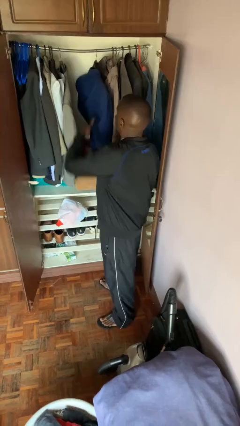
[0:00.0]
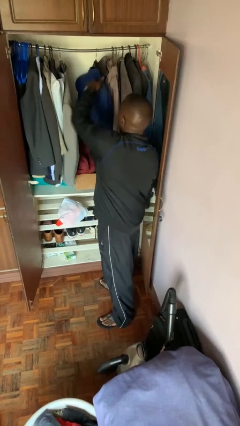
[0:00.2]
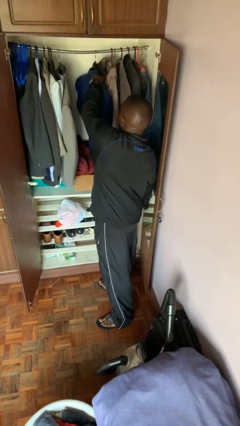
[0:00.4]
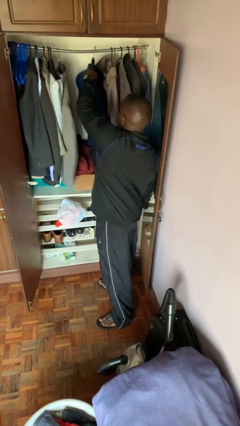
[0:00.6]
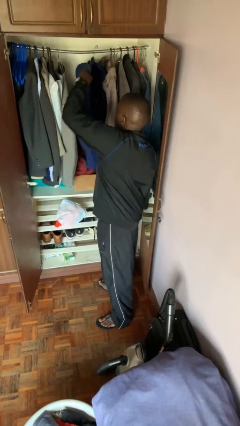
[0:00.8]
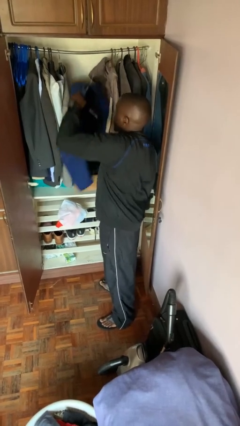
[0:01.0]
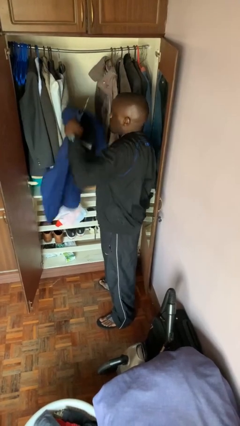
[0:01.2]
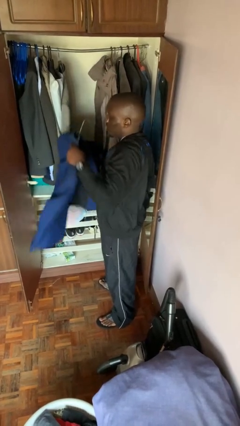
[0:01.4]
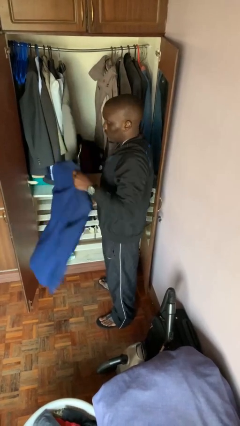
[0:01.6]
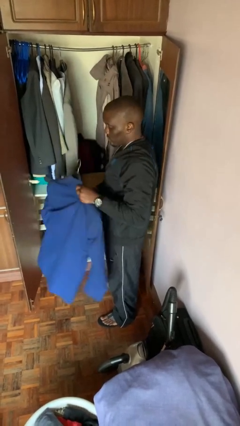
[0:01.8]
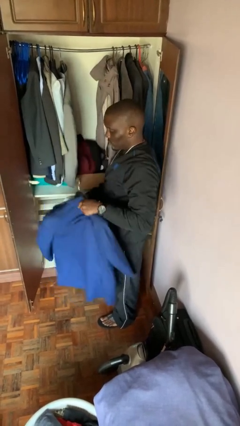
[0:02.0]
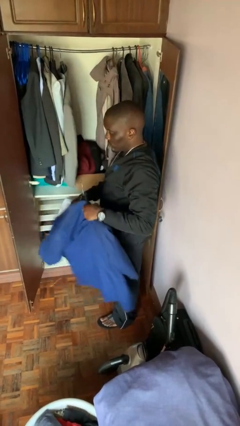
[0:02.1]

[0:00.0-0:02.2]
person takes clothes from closet

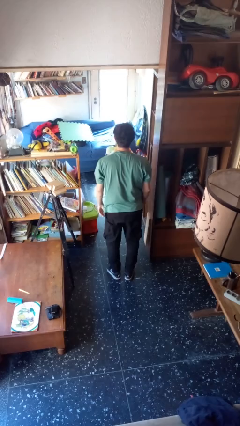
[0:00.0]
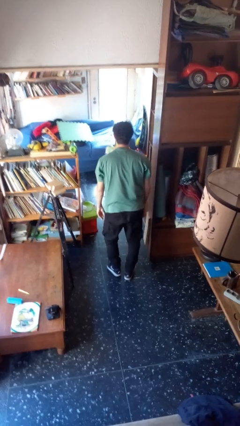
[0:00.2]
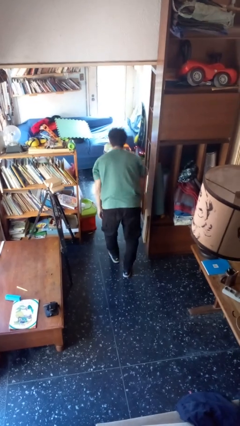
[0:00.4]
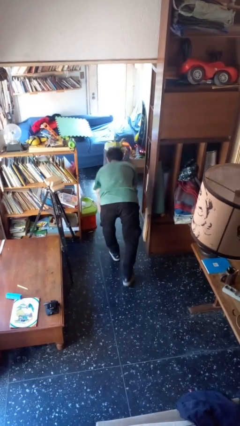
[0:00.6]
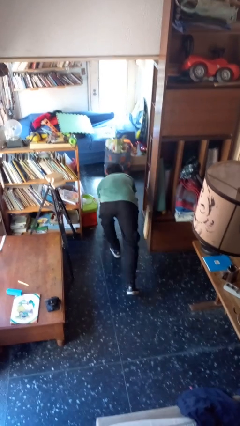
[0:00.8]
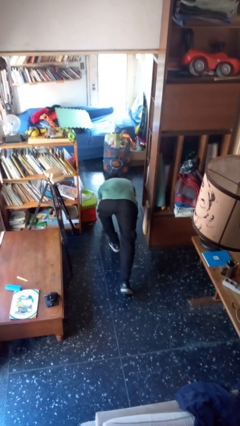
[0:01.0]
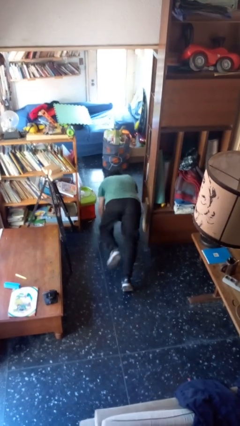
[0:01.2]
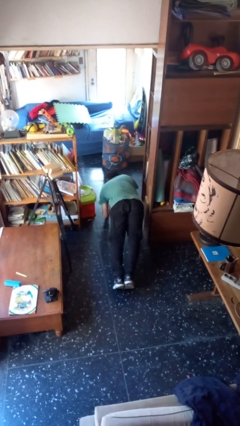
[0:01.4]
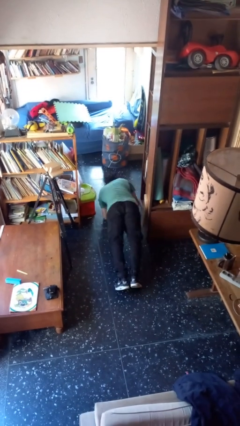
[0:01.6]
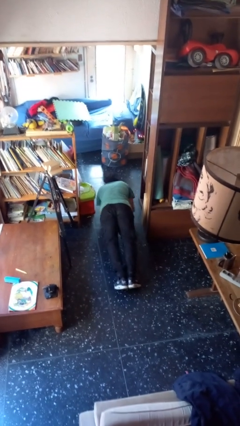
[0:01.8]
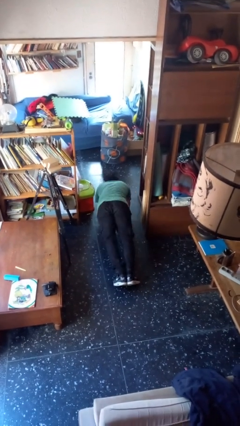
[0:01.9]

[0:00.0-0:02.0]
person exercises with plank

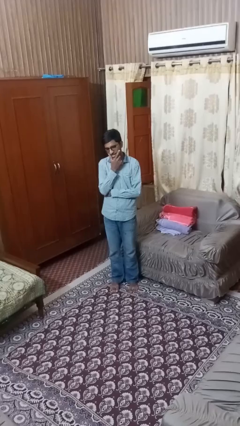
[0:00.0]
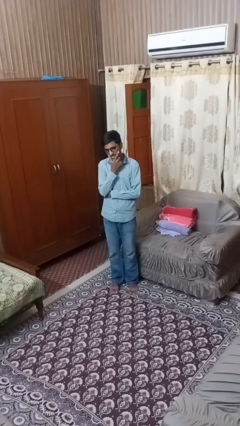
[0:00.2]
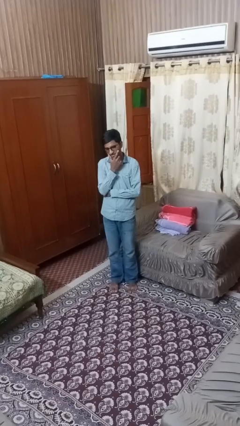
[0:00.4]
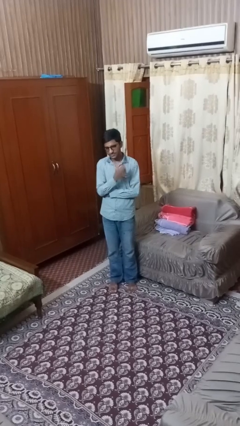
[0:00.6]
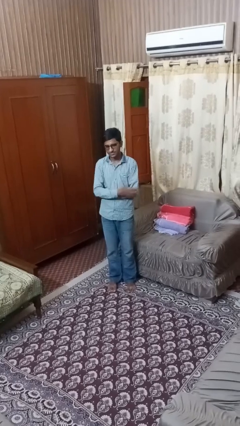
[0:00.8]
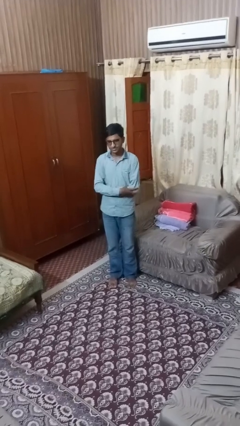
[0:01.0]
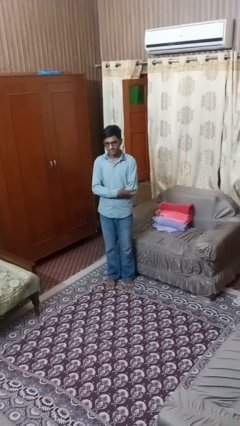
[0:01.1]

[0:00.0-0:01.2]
person strokes chin

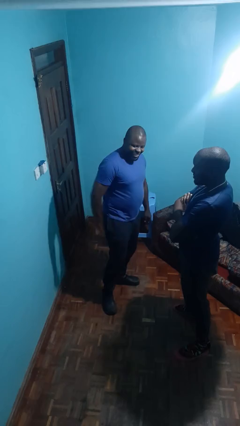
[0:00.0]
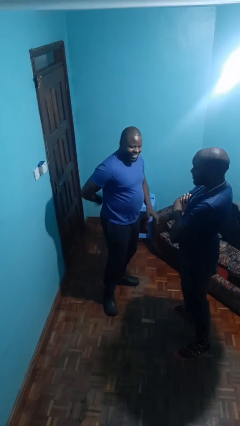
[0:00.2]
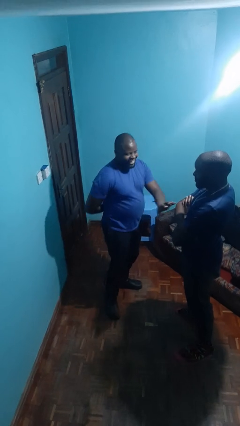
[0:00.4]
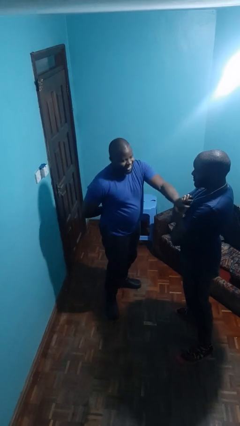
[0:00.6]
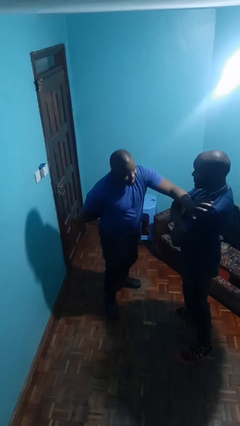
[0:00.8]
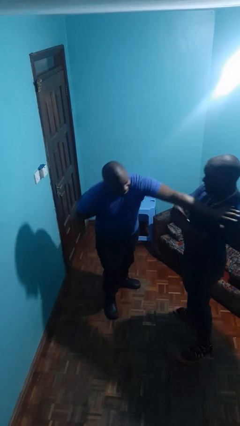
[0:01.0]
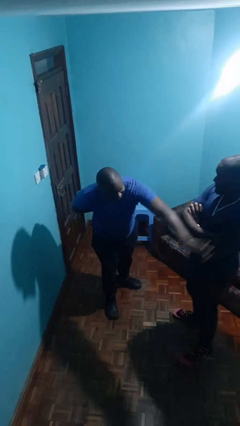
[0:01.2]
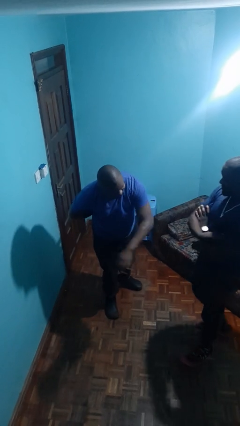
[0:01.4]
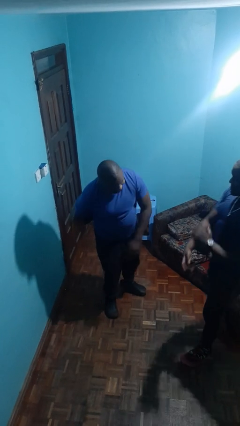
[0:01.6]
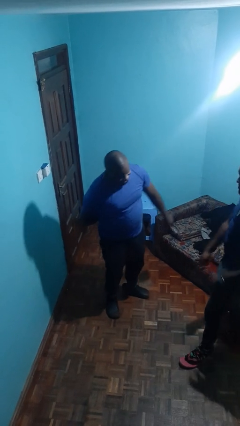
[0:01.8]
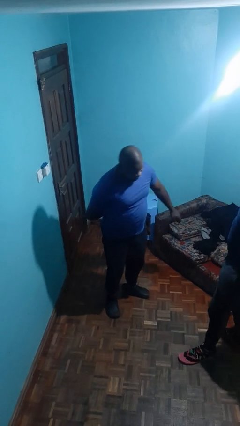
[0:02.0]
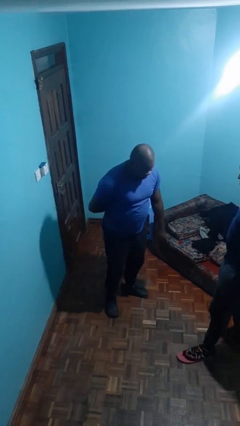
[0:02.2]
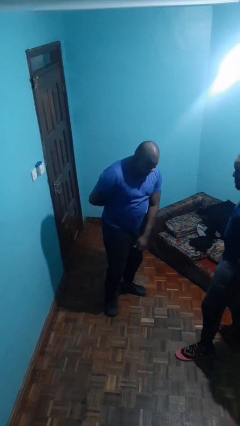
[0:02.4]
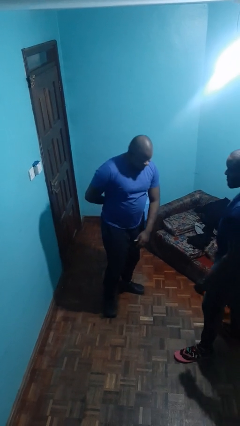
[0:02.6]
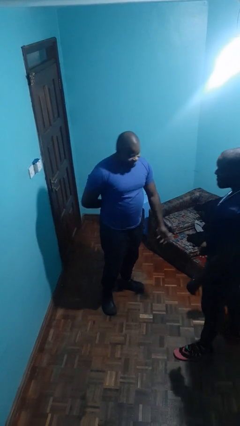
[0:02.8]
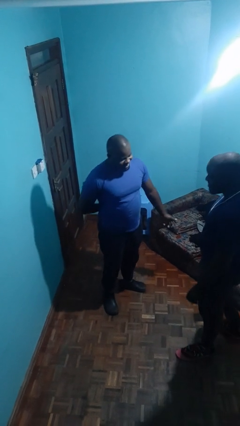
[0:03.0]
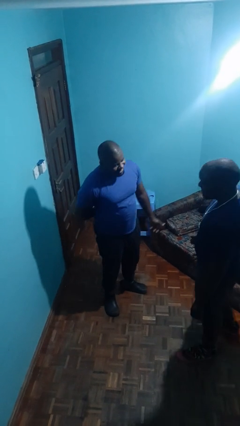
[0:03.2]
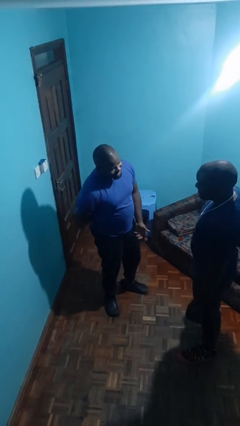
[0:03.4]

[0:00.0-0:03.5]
person shoves person

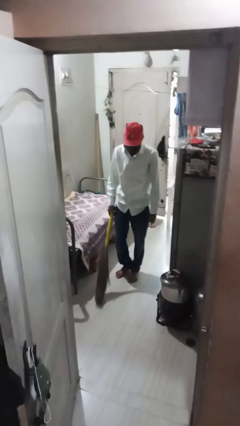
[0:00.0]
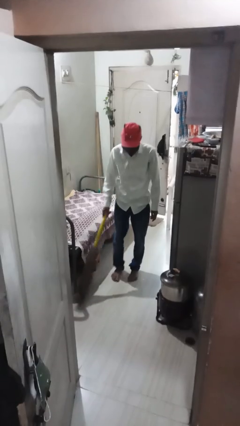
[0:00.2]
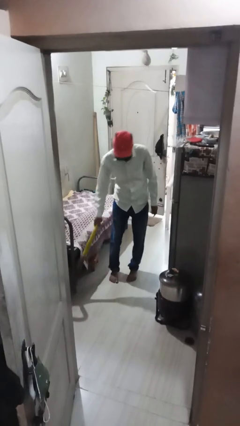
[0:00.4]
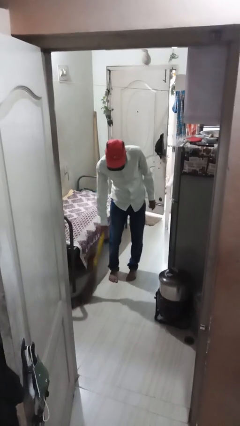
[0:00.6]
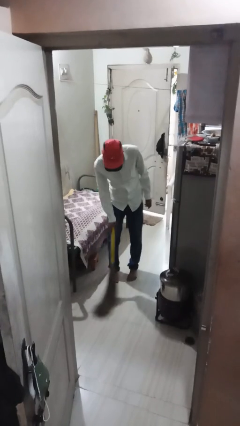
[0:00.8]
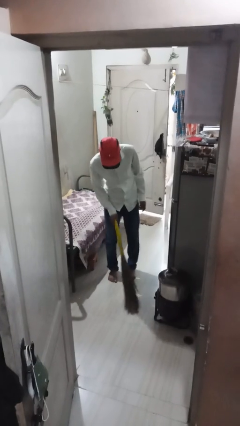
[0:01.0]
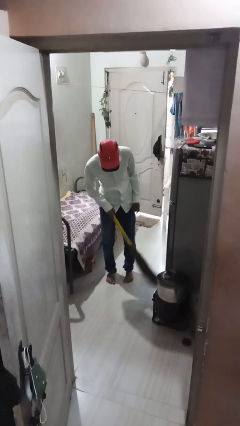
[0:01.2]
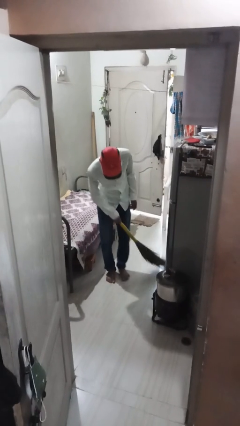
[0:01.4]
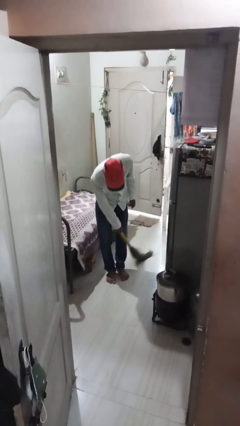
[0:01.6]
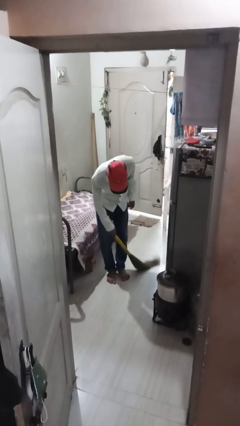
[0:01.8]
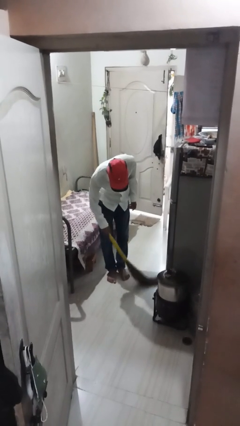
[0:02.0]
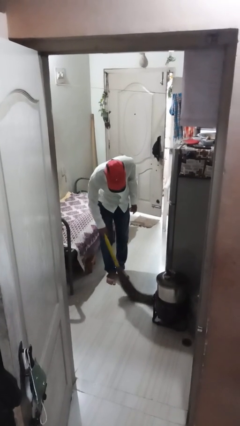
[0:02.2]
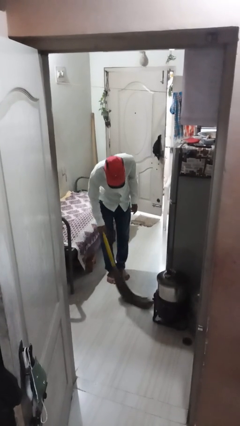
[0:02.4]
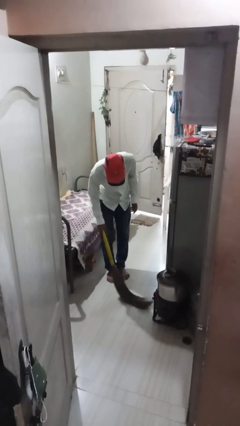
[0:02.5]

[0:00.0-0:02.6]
person sweeps floor

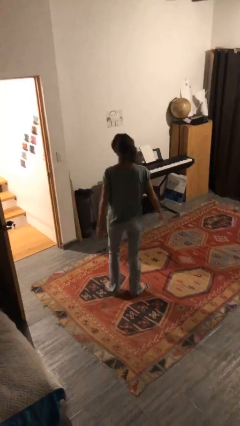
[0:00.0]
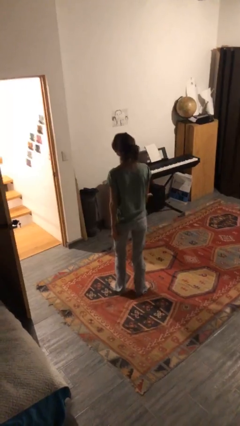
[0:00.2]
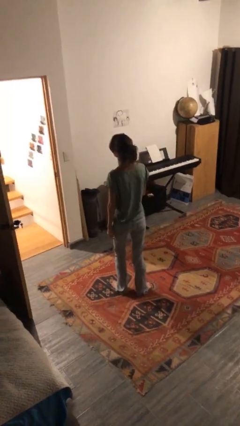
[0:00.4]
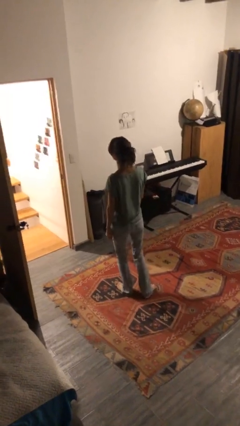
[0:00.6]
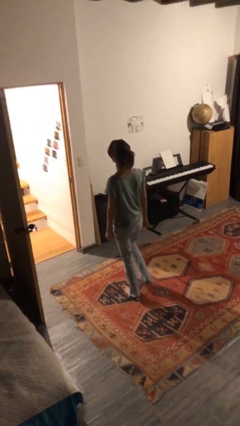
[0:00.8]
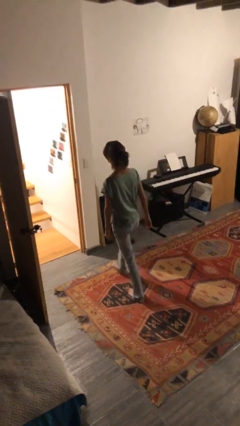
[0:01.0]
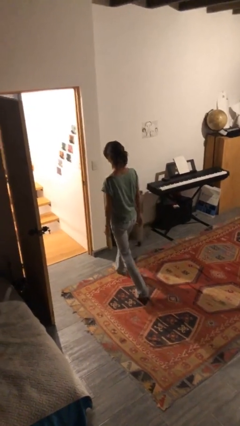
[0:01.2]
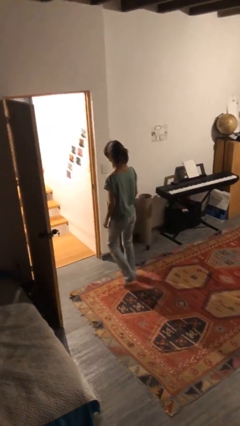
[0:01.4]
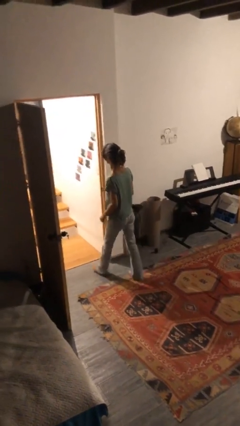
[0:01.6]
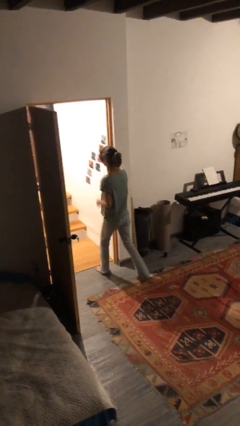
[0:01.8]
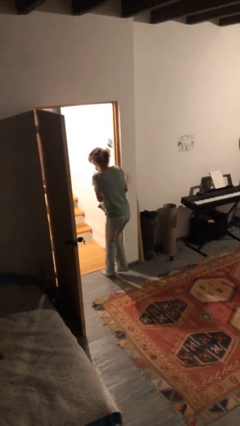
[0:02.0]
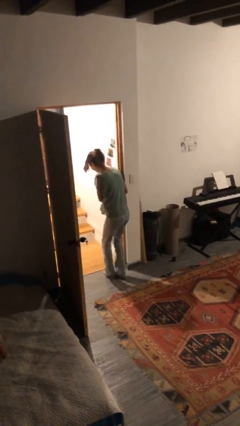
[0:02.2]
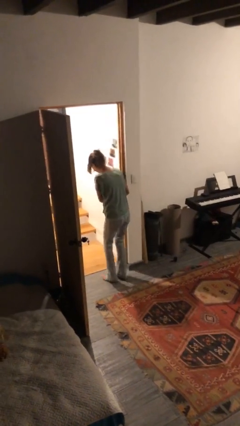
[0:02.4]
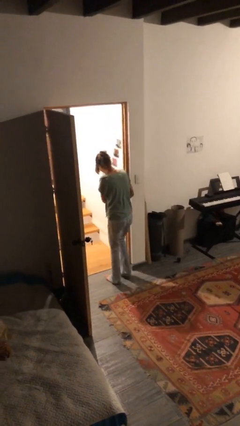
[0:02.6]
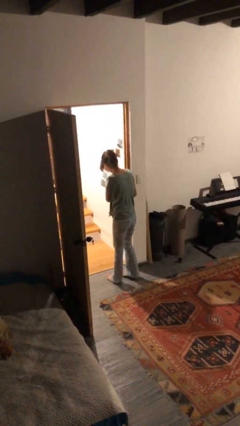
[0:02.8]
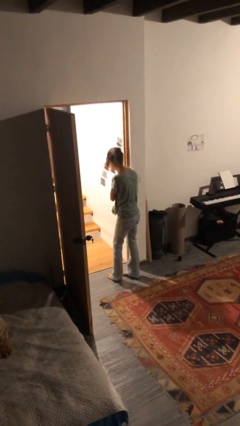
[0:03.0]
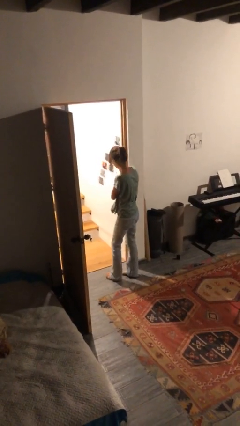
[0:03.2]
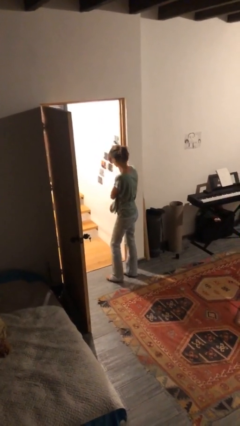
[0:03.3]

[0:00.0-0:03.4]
person bumps into wall

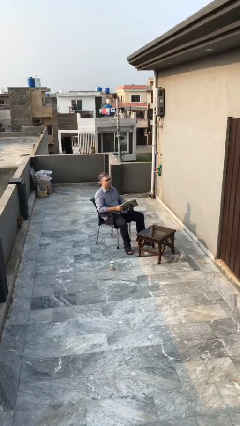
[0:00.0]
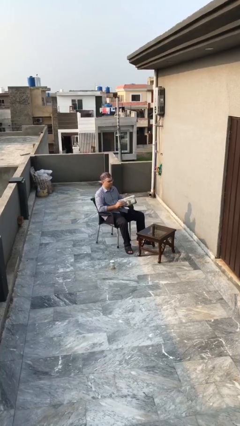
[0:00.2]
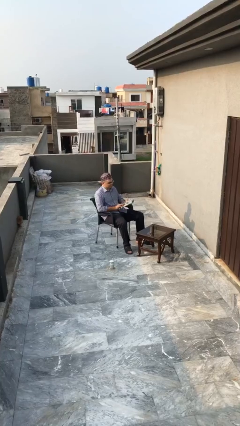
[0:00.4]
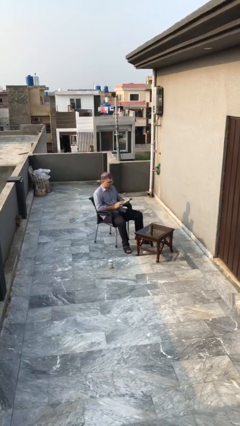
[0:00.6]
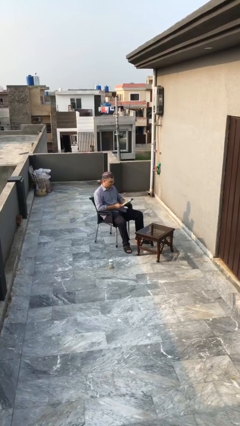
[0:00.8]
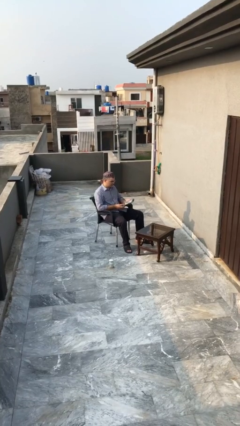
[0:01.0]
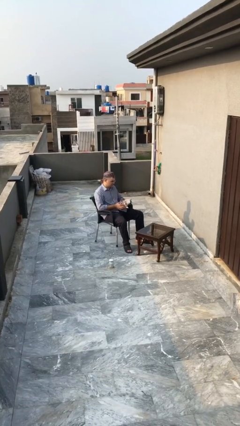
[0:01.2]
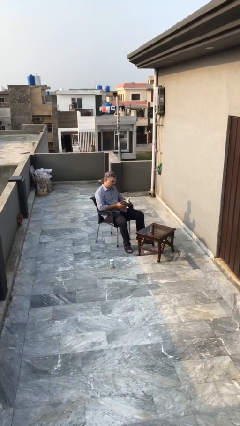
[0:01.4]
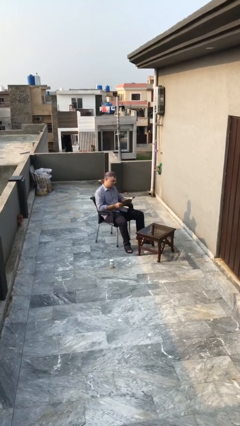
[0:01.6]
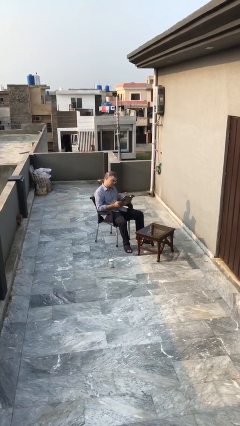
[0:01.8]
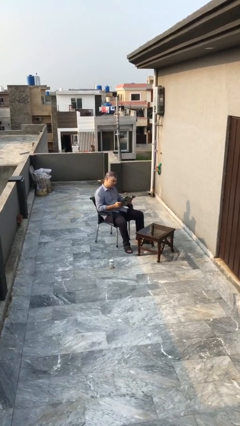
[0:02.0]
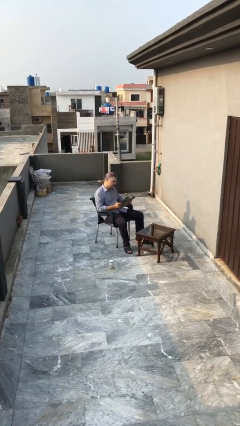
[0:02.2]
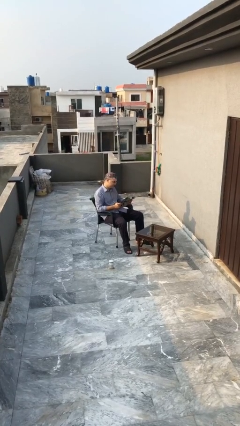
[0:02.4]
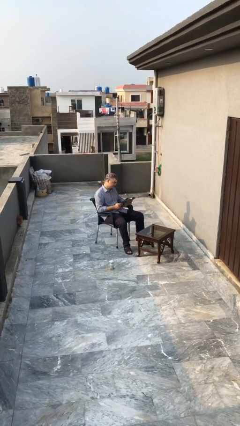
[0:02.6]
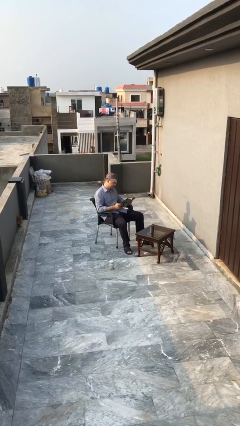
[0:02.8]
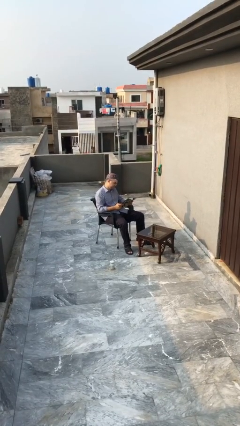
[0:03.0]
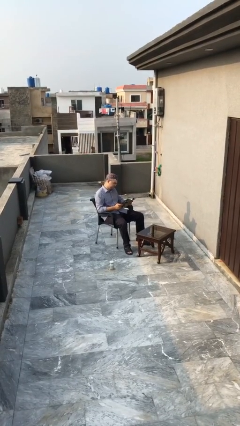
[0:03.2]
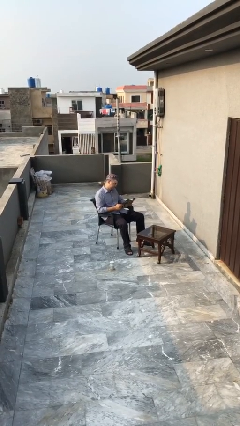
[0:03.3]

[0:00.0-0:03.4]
person reads document
